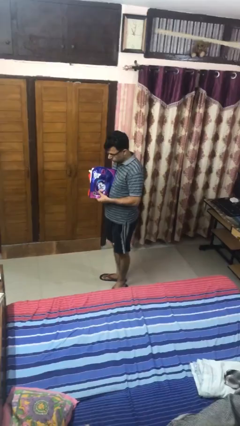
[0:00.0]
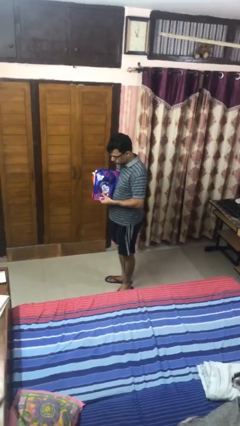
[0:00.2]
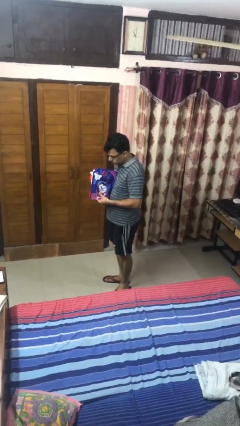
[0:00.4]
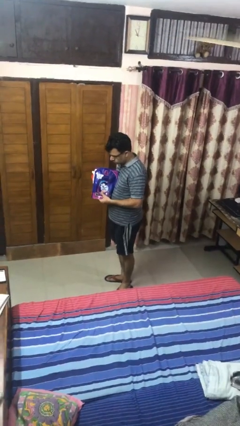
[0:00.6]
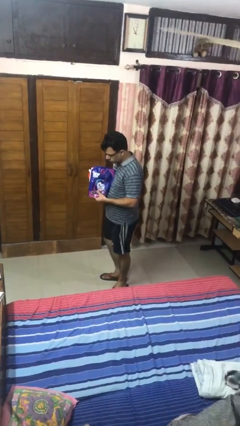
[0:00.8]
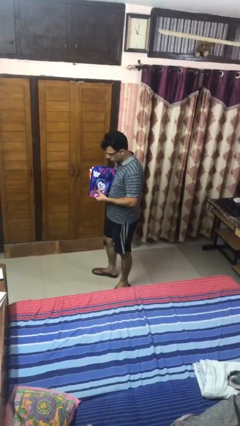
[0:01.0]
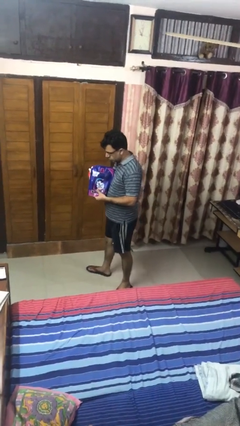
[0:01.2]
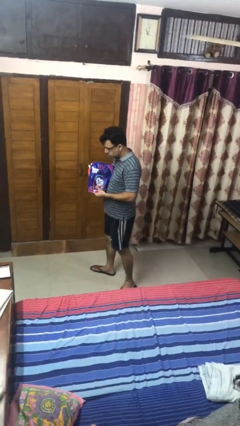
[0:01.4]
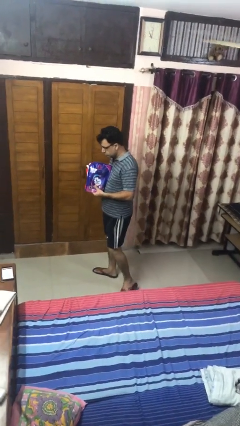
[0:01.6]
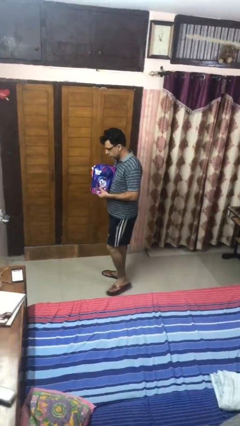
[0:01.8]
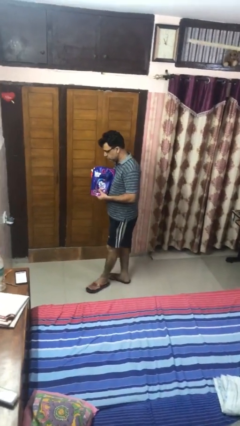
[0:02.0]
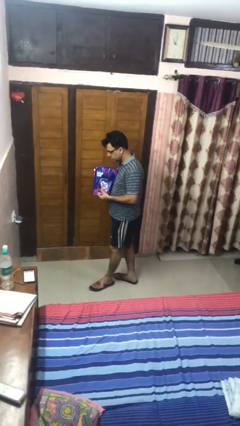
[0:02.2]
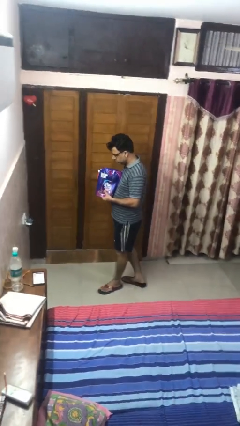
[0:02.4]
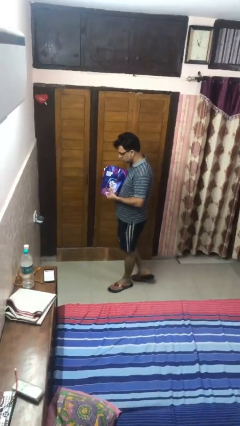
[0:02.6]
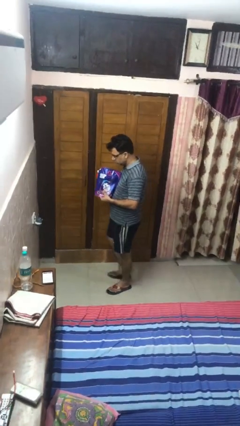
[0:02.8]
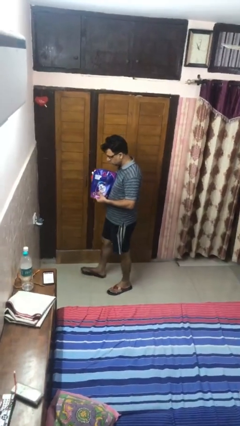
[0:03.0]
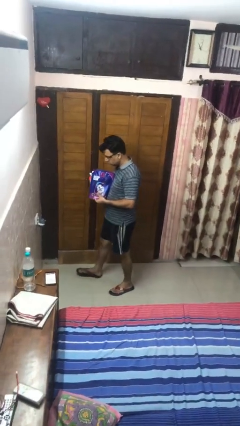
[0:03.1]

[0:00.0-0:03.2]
person carries groceries

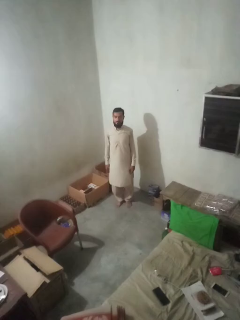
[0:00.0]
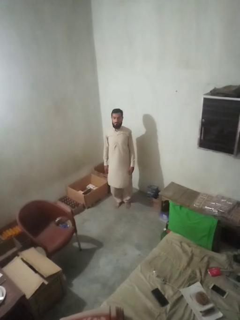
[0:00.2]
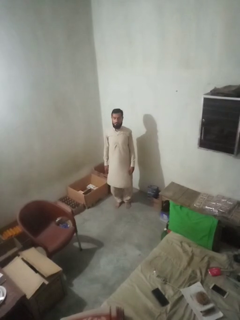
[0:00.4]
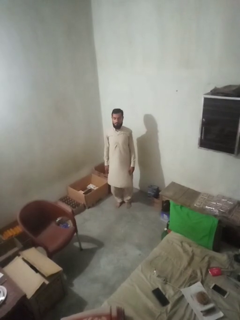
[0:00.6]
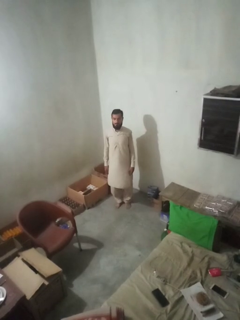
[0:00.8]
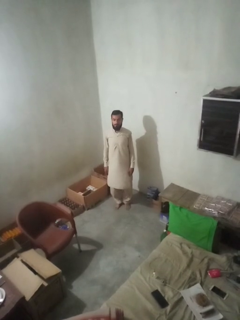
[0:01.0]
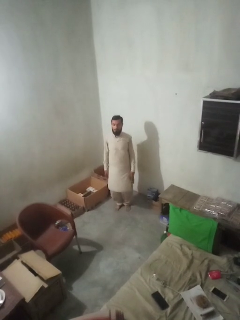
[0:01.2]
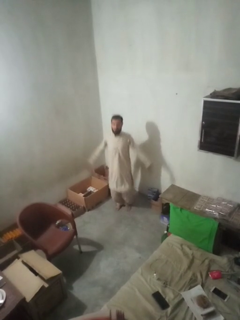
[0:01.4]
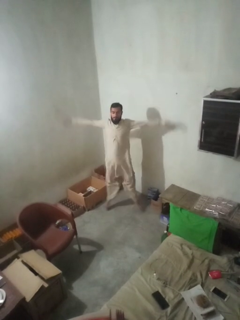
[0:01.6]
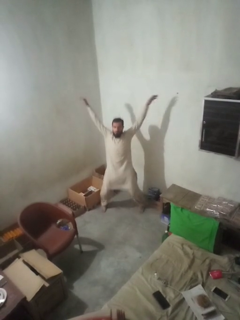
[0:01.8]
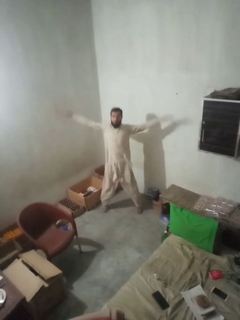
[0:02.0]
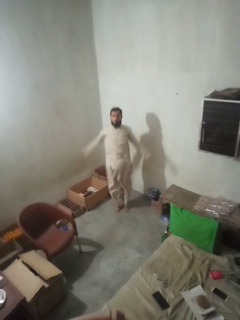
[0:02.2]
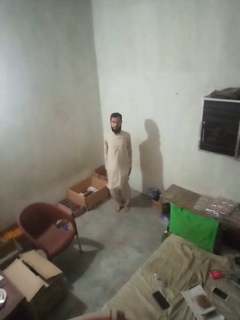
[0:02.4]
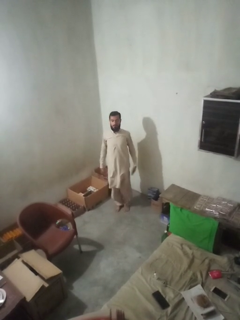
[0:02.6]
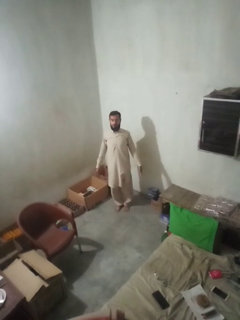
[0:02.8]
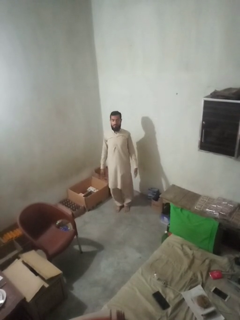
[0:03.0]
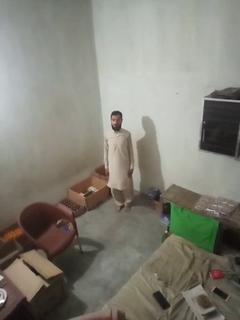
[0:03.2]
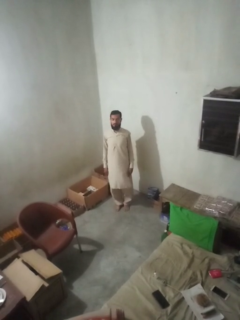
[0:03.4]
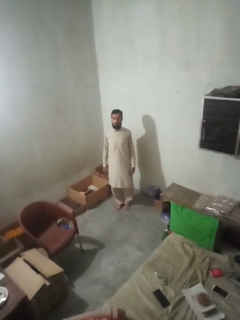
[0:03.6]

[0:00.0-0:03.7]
person exercises with jumping jacks

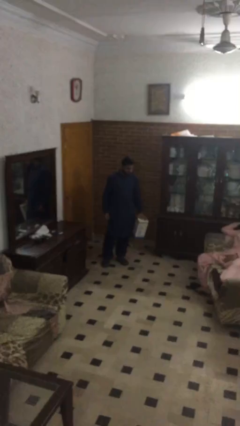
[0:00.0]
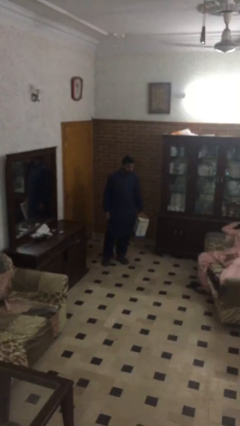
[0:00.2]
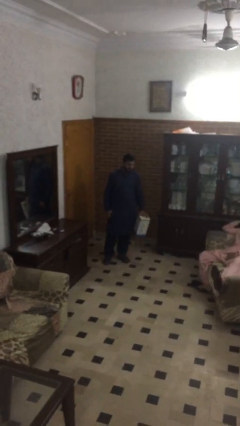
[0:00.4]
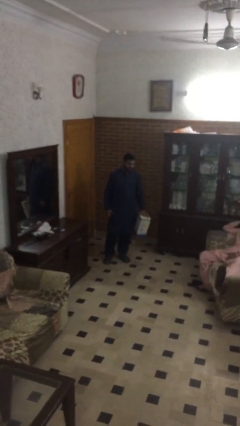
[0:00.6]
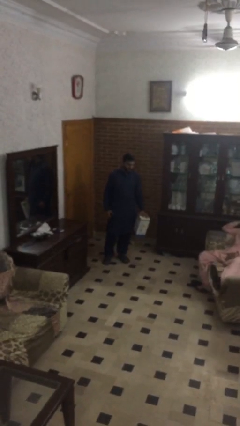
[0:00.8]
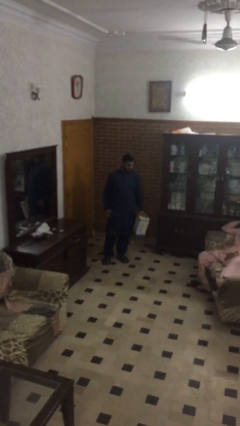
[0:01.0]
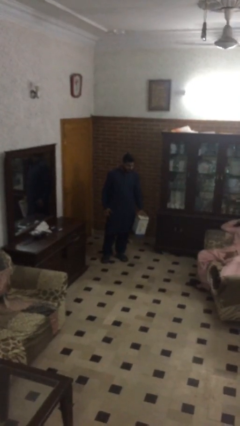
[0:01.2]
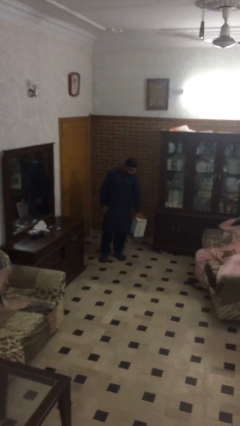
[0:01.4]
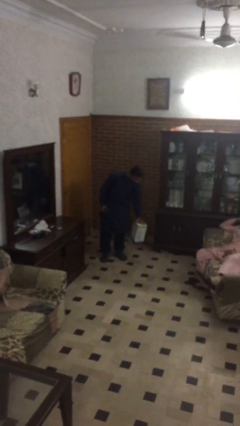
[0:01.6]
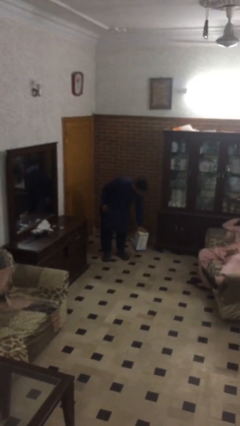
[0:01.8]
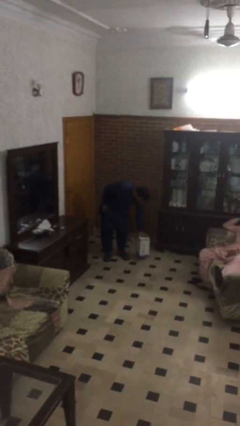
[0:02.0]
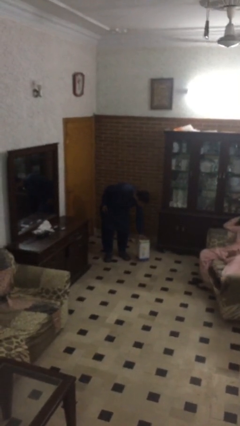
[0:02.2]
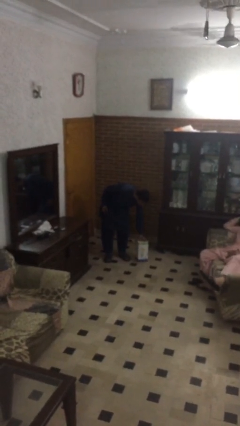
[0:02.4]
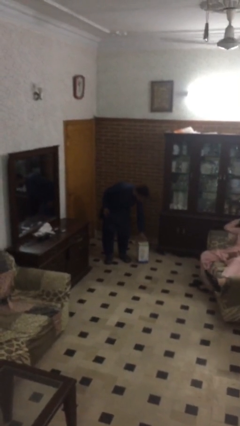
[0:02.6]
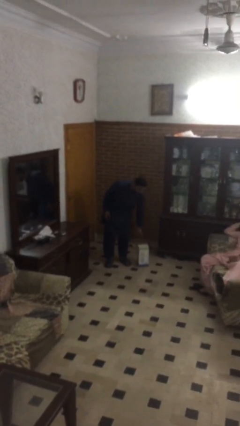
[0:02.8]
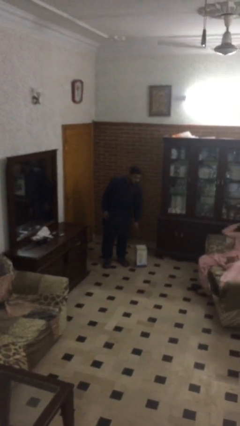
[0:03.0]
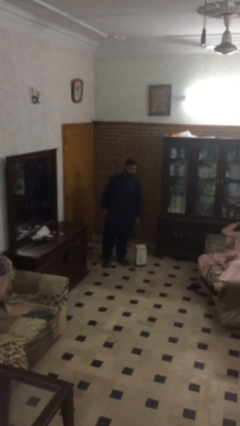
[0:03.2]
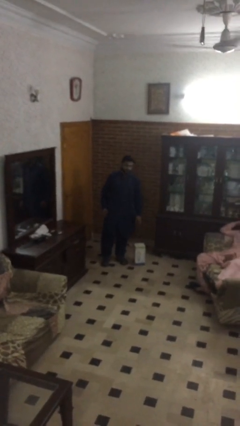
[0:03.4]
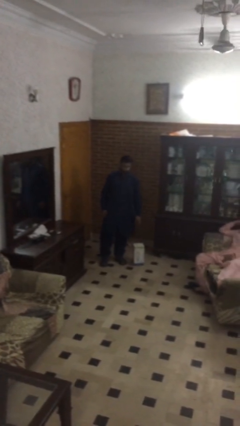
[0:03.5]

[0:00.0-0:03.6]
person puts down object on floor

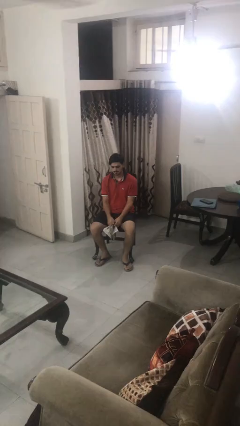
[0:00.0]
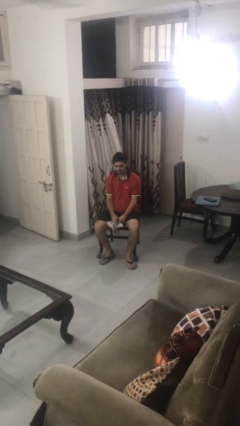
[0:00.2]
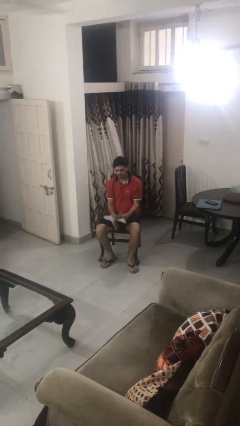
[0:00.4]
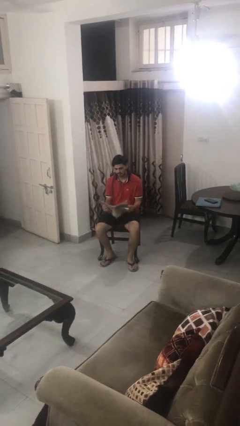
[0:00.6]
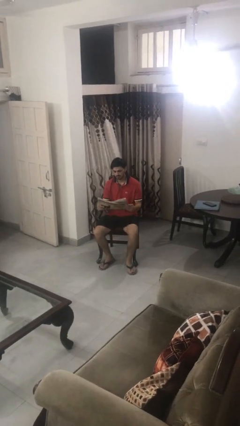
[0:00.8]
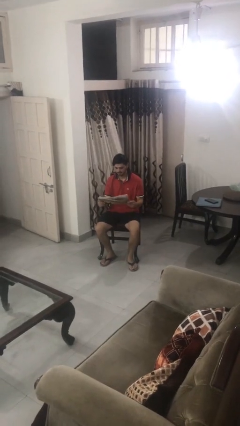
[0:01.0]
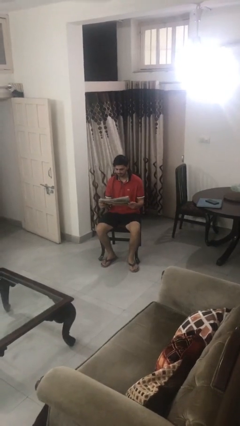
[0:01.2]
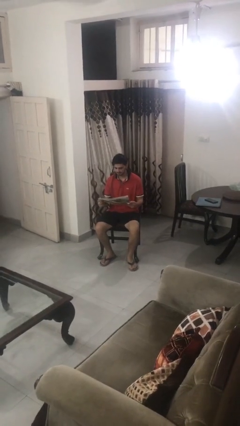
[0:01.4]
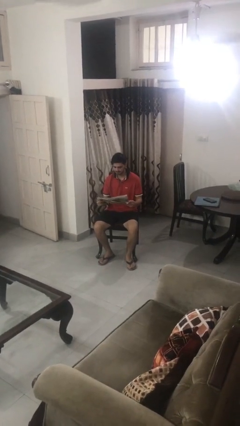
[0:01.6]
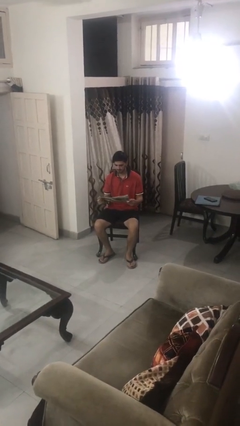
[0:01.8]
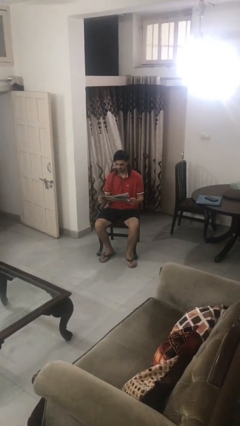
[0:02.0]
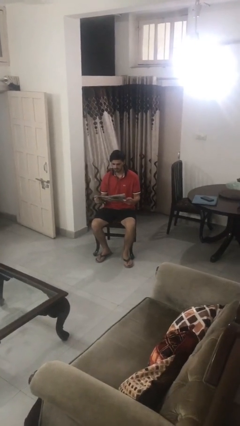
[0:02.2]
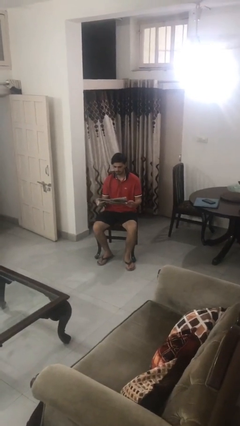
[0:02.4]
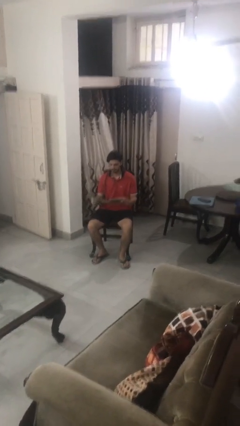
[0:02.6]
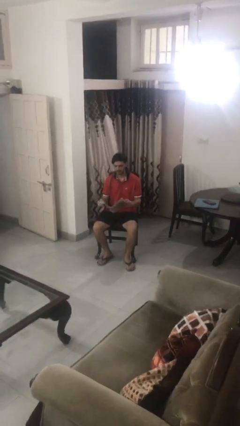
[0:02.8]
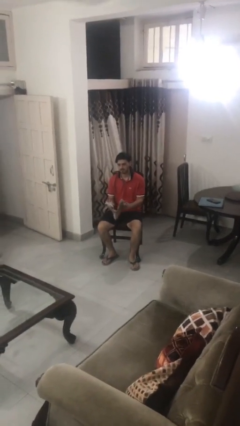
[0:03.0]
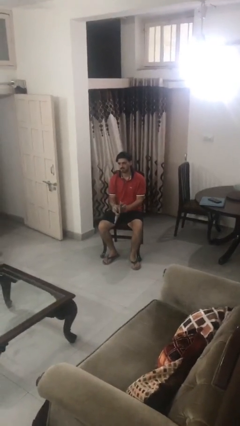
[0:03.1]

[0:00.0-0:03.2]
person reads newspaper

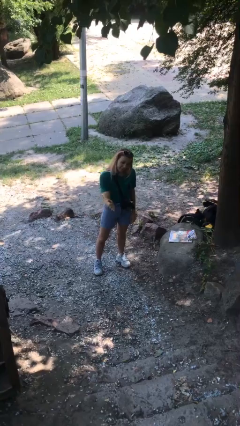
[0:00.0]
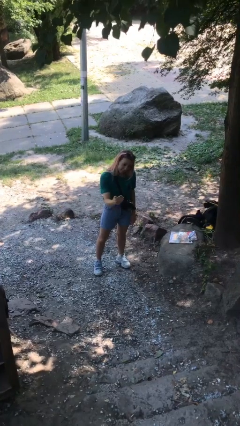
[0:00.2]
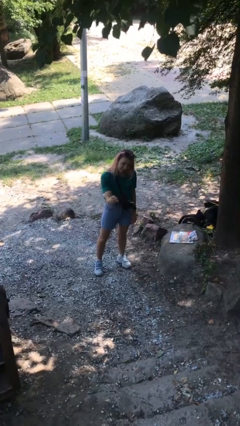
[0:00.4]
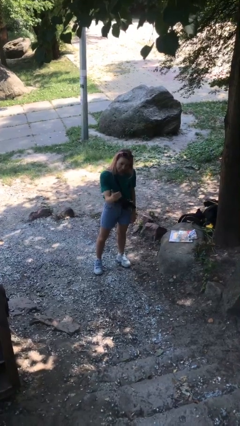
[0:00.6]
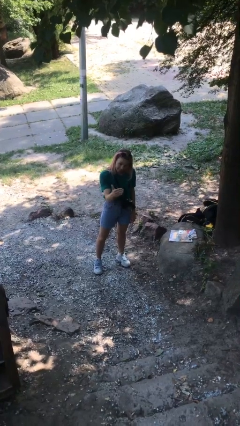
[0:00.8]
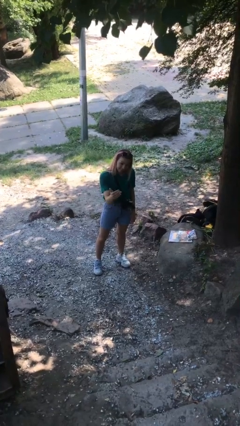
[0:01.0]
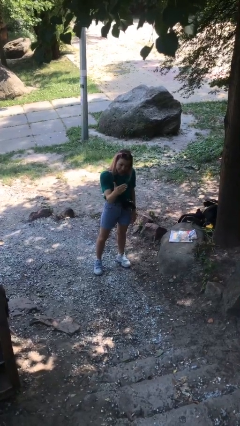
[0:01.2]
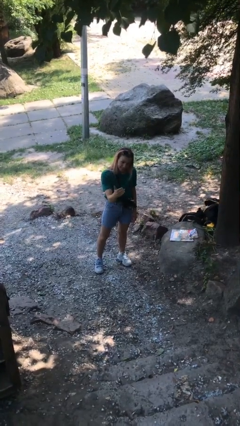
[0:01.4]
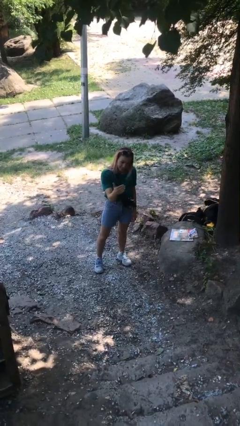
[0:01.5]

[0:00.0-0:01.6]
person gestures come here

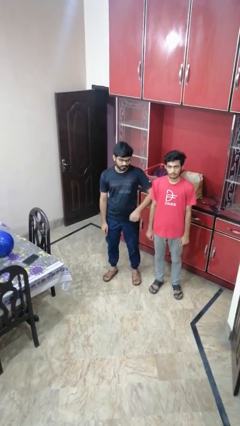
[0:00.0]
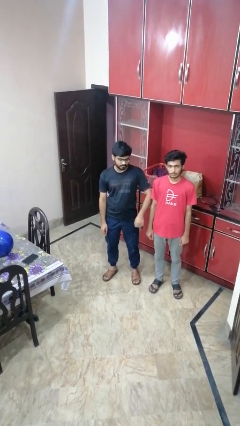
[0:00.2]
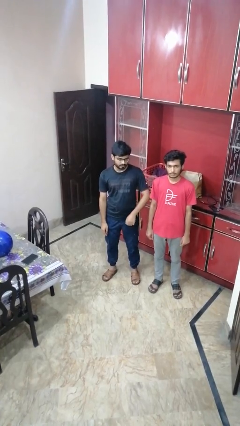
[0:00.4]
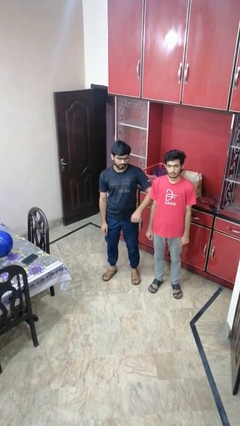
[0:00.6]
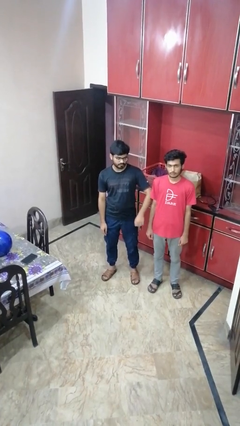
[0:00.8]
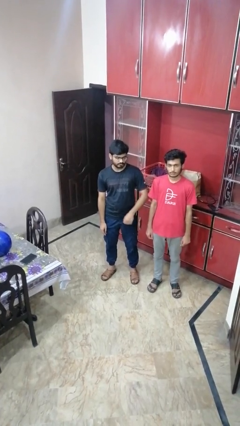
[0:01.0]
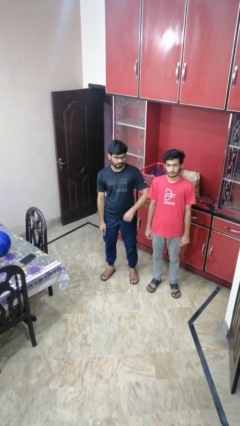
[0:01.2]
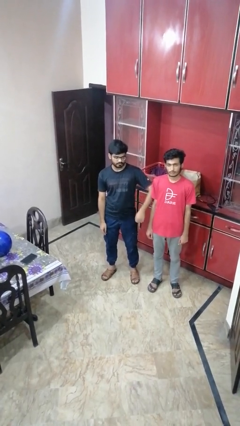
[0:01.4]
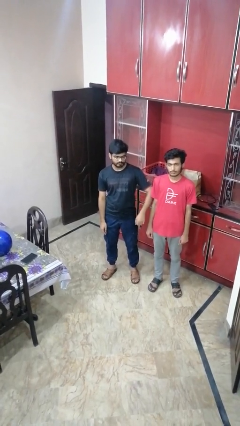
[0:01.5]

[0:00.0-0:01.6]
person nudges person with elbow

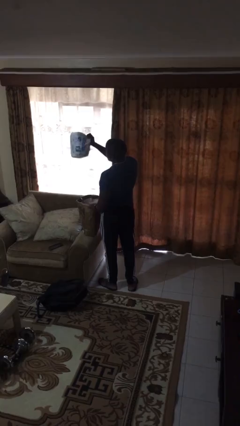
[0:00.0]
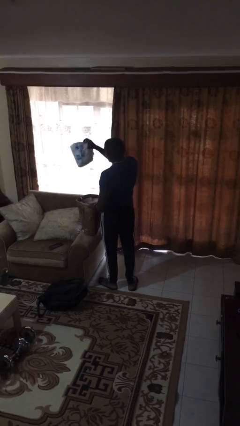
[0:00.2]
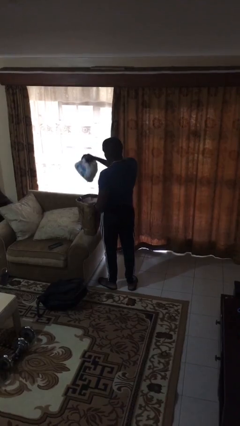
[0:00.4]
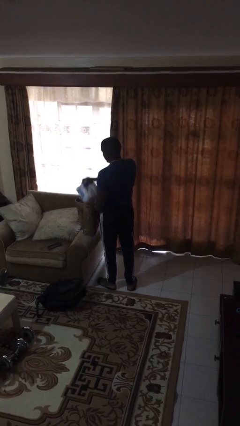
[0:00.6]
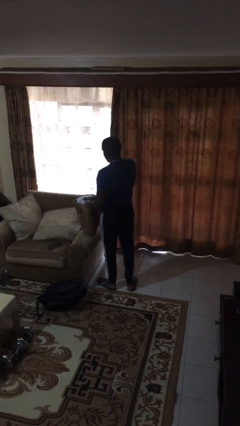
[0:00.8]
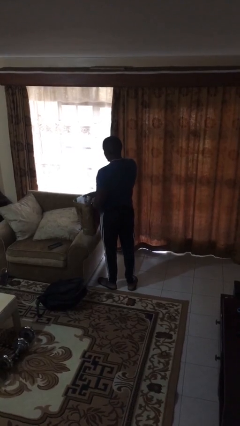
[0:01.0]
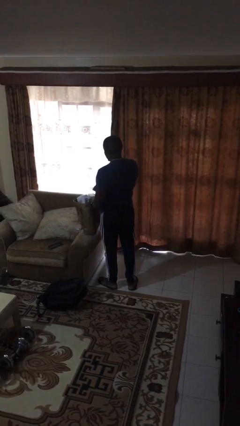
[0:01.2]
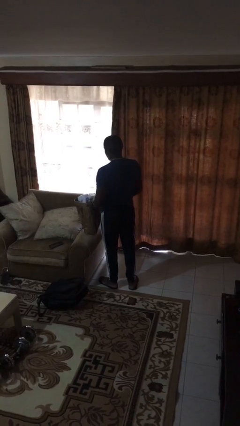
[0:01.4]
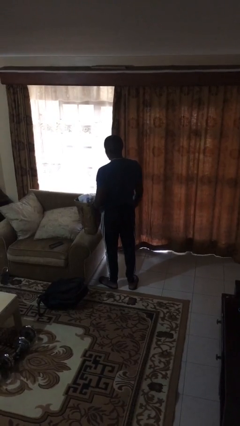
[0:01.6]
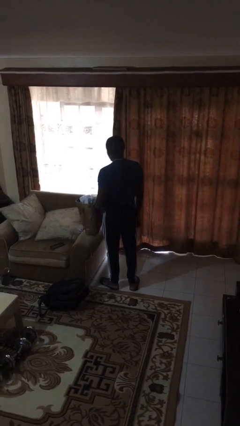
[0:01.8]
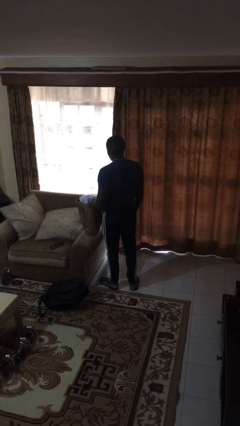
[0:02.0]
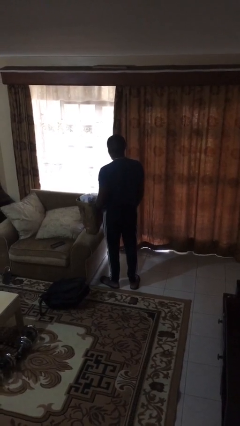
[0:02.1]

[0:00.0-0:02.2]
person puts object into bag
